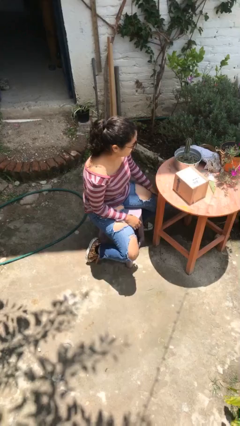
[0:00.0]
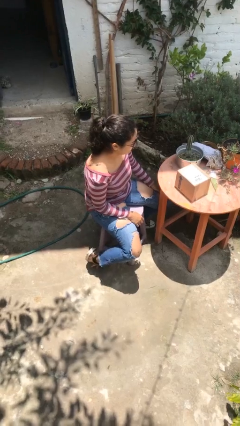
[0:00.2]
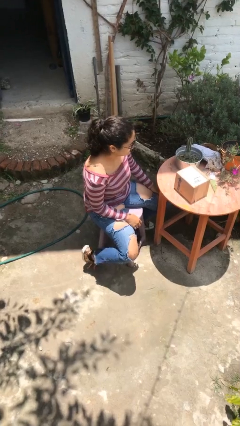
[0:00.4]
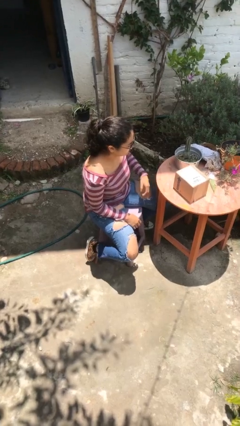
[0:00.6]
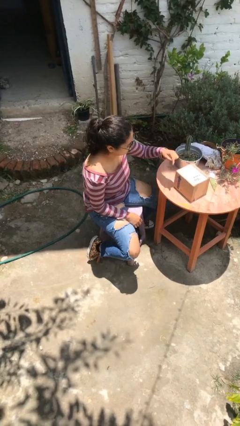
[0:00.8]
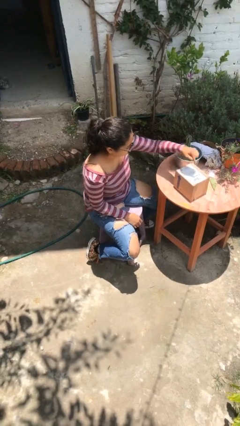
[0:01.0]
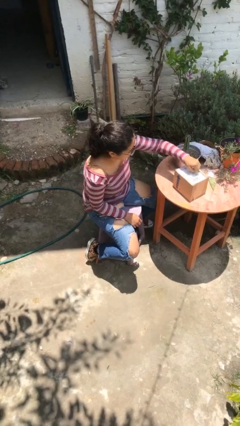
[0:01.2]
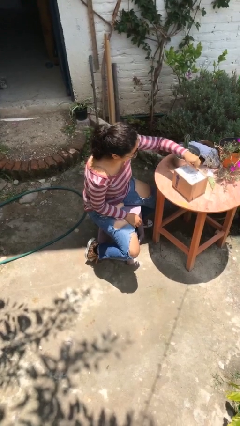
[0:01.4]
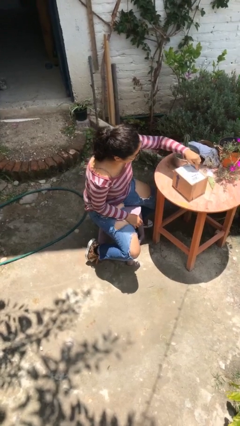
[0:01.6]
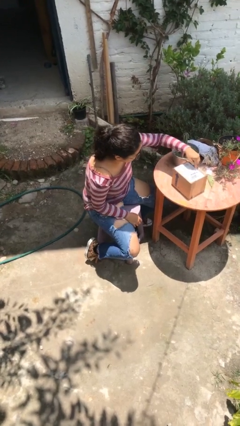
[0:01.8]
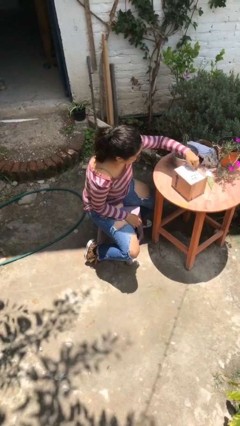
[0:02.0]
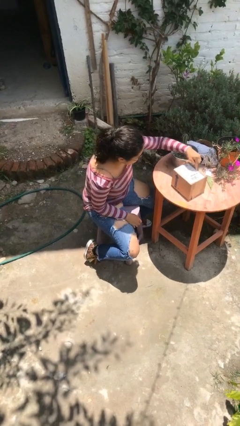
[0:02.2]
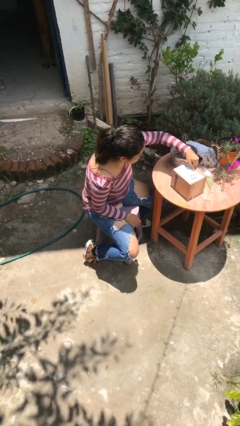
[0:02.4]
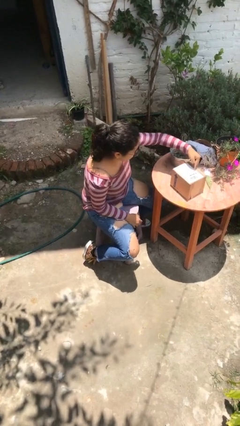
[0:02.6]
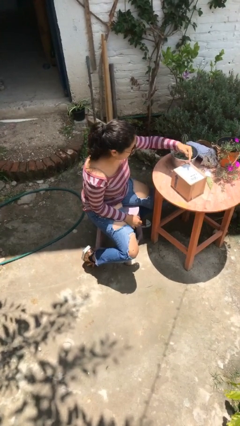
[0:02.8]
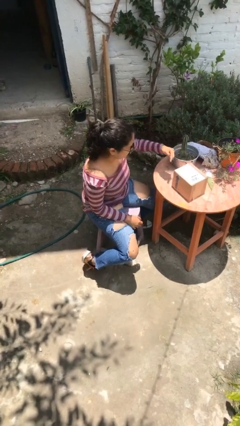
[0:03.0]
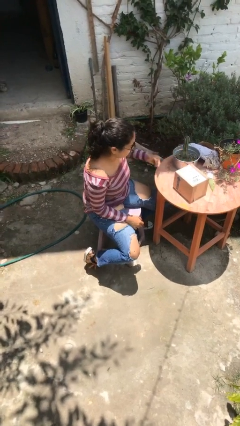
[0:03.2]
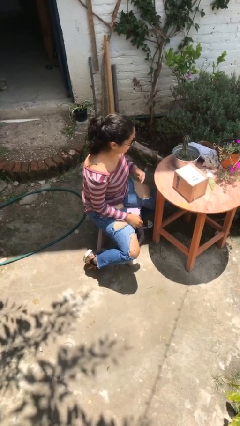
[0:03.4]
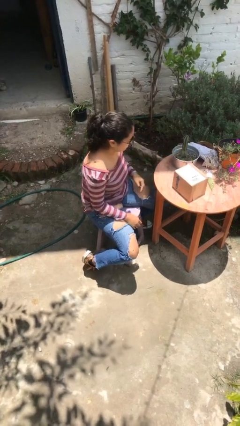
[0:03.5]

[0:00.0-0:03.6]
person swats bug

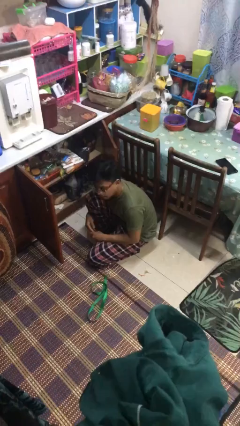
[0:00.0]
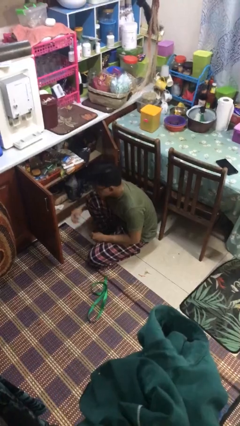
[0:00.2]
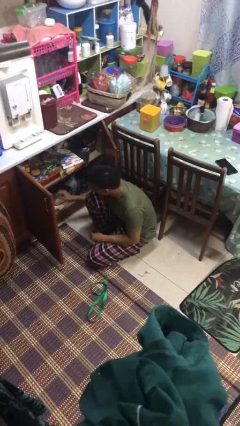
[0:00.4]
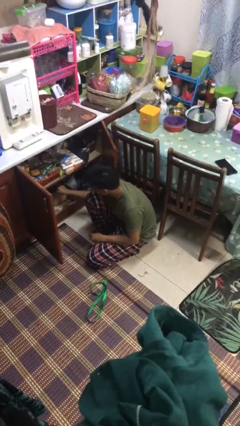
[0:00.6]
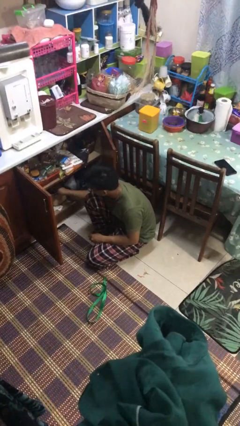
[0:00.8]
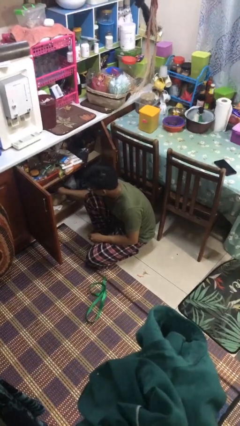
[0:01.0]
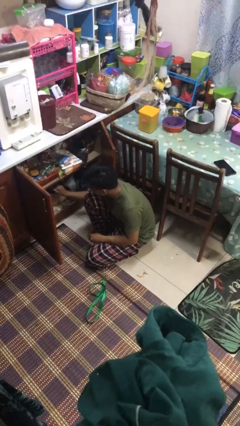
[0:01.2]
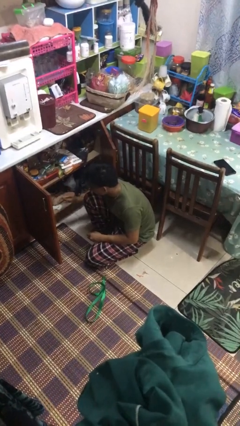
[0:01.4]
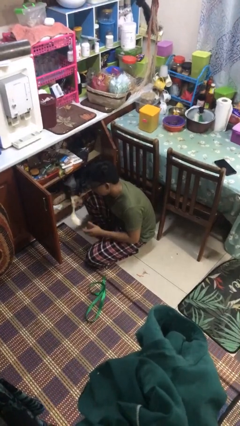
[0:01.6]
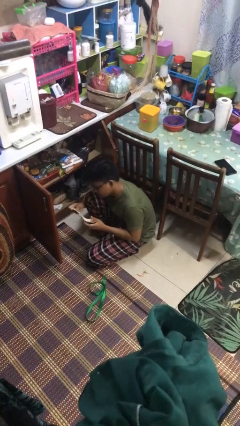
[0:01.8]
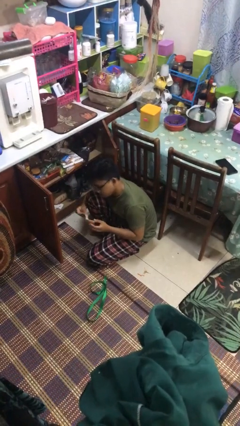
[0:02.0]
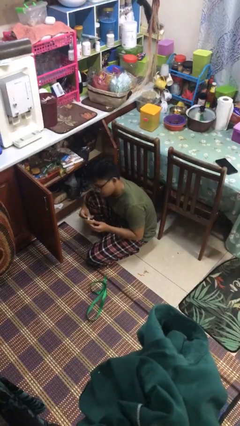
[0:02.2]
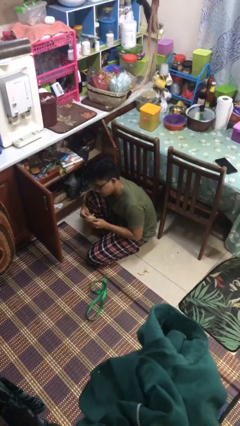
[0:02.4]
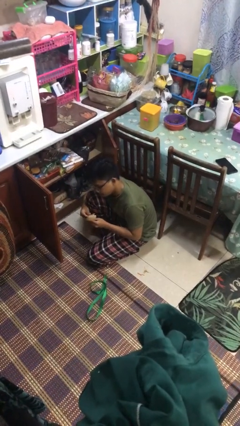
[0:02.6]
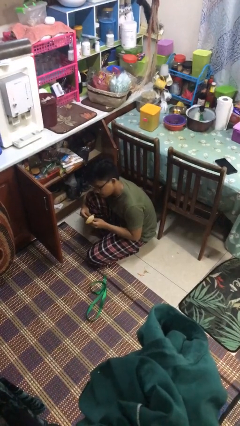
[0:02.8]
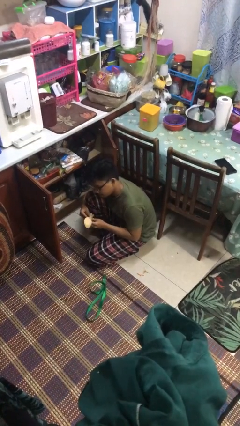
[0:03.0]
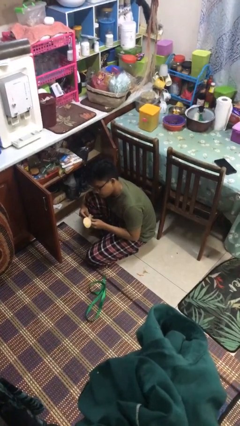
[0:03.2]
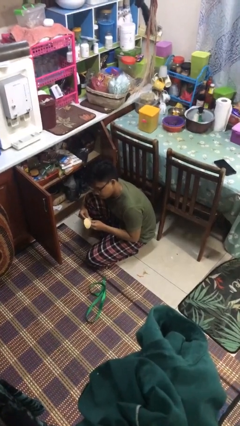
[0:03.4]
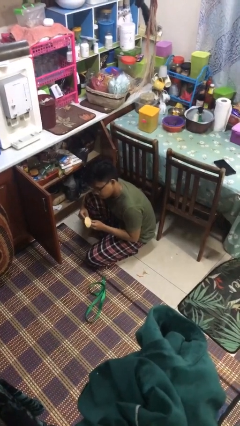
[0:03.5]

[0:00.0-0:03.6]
person takes object from kitchen drawer

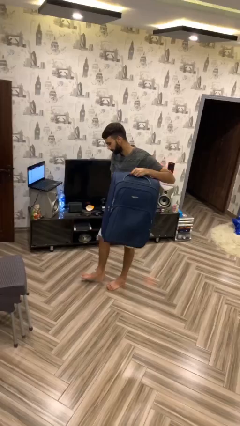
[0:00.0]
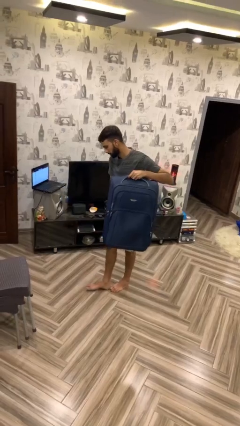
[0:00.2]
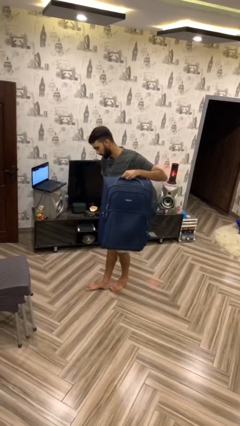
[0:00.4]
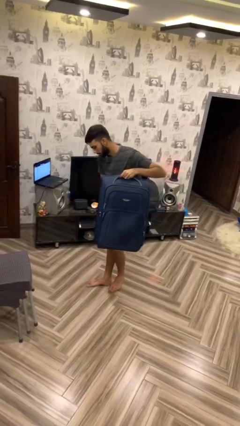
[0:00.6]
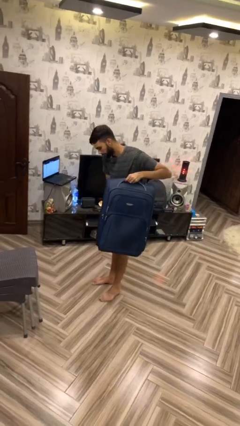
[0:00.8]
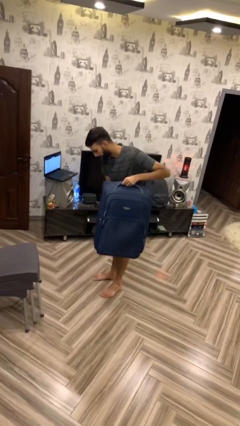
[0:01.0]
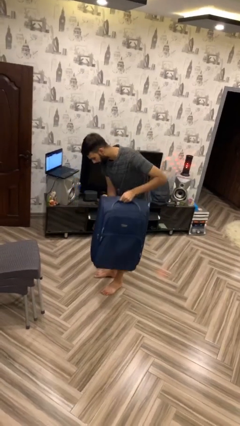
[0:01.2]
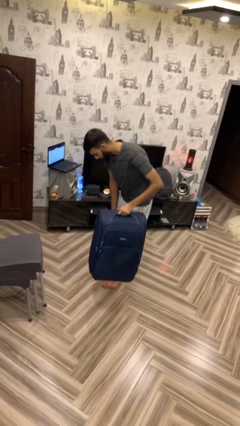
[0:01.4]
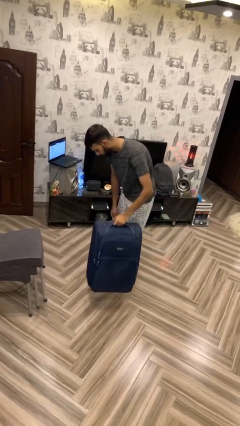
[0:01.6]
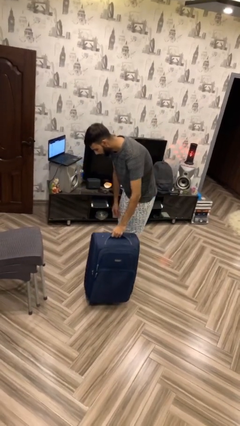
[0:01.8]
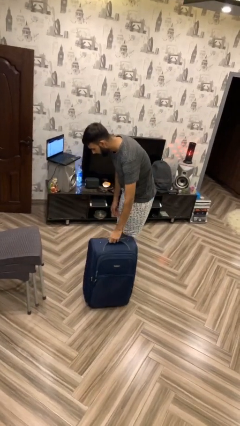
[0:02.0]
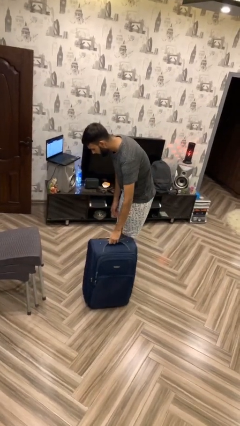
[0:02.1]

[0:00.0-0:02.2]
person puts down object on floor

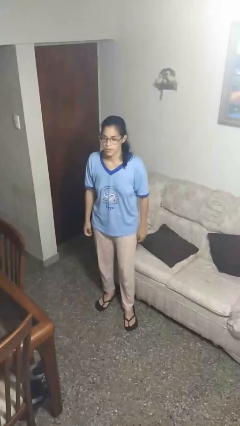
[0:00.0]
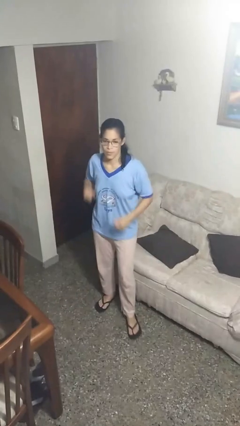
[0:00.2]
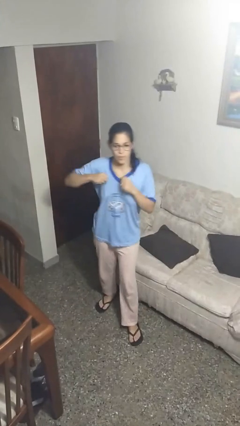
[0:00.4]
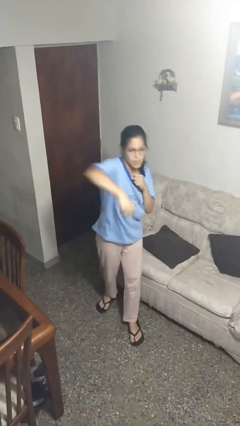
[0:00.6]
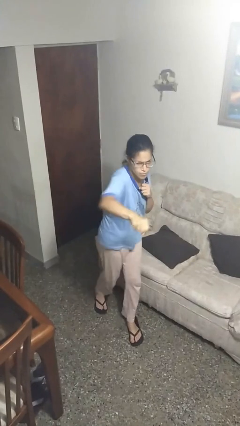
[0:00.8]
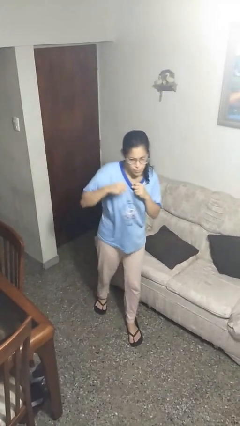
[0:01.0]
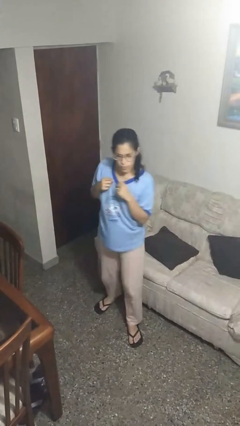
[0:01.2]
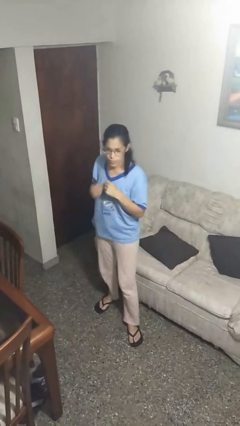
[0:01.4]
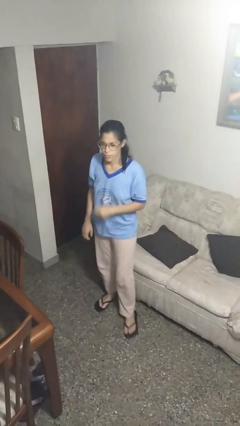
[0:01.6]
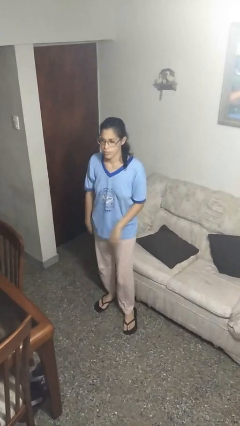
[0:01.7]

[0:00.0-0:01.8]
person karate chop

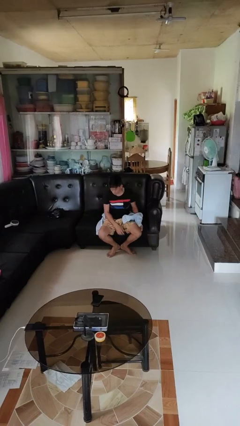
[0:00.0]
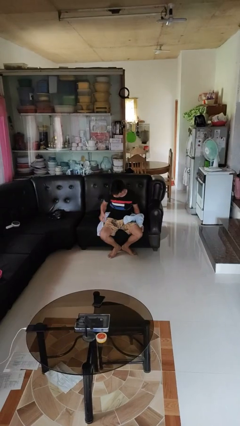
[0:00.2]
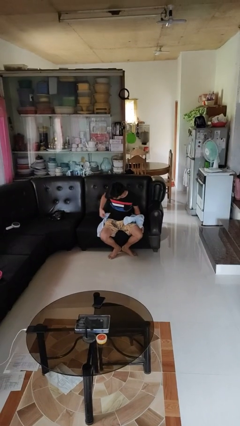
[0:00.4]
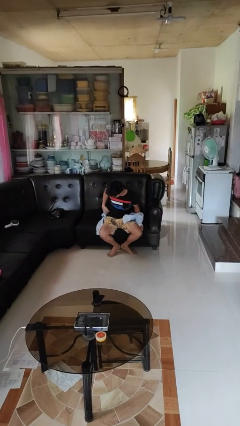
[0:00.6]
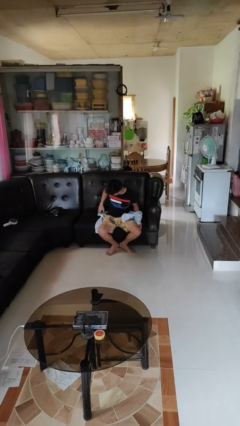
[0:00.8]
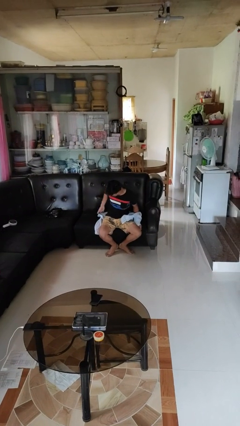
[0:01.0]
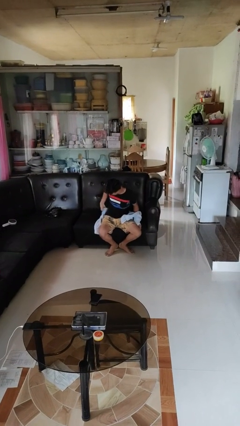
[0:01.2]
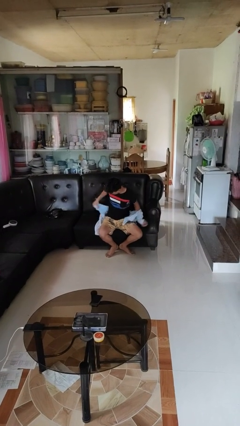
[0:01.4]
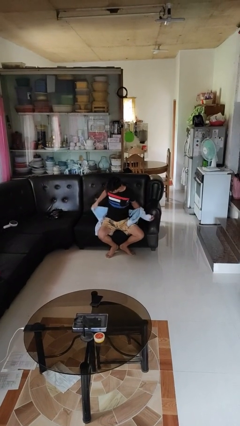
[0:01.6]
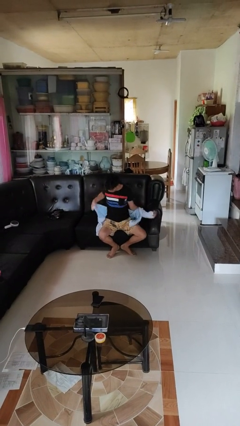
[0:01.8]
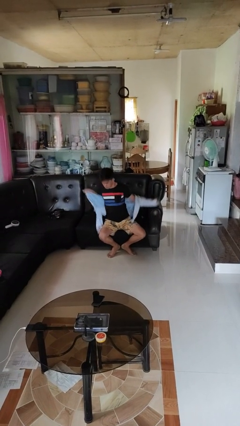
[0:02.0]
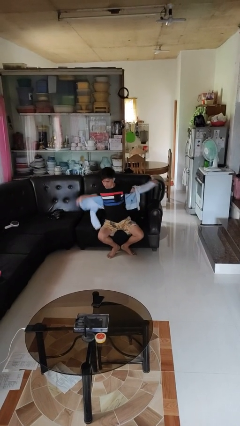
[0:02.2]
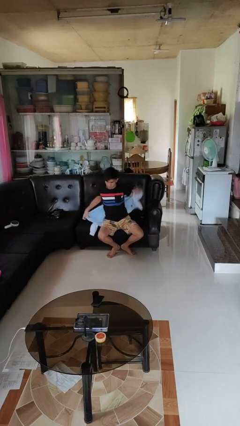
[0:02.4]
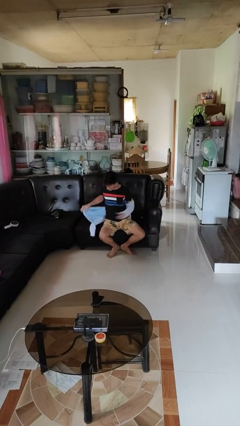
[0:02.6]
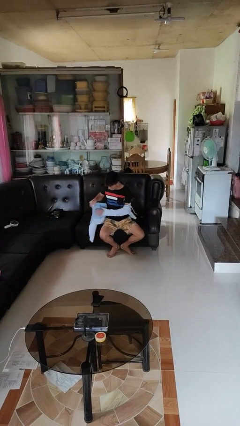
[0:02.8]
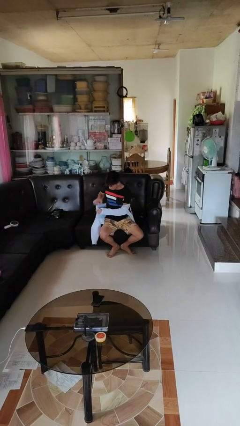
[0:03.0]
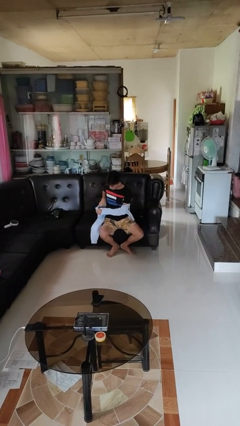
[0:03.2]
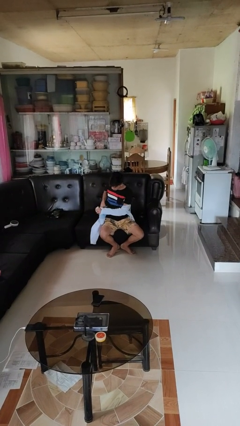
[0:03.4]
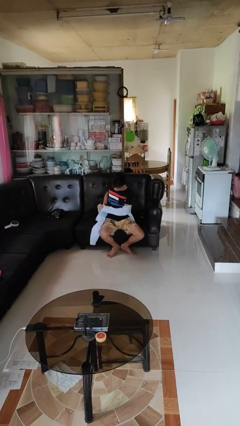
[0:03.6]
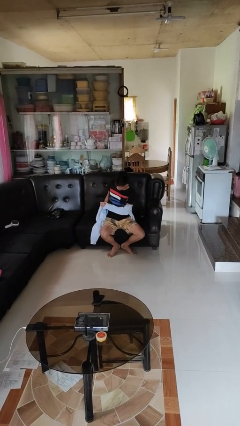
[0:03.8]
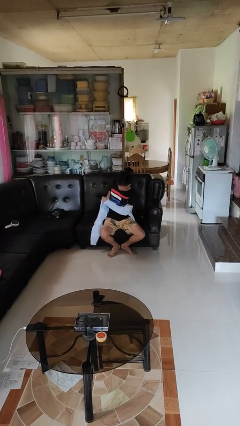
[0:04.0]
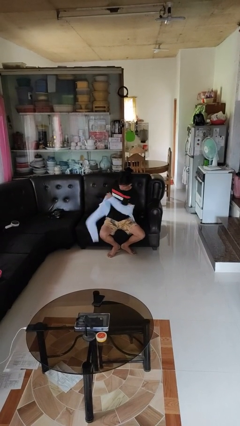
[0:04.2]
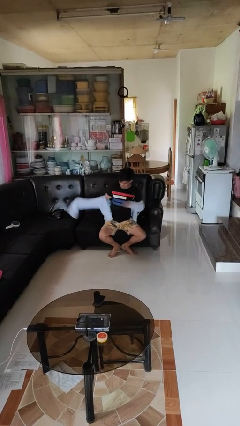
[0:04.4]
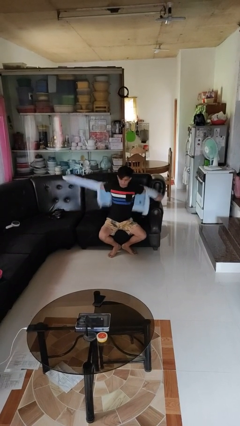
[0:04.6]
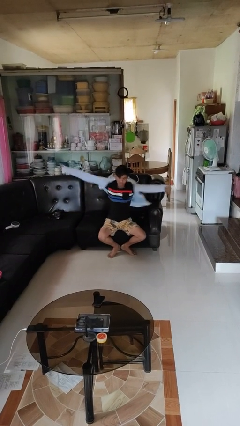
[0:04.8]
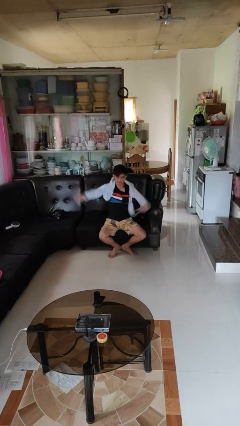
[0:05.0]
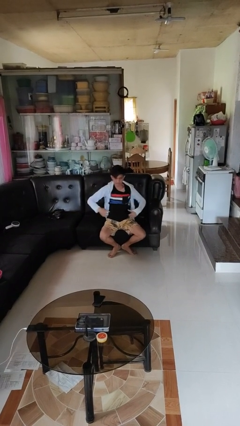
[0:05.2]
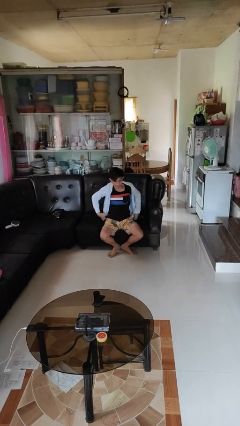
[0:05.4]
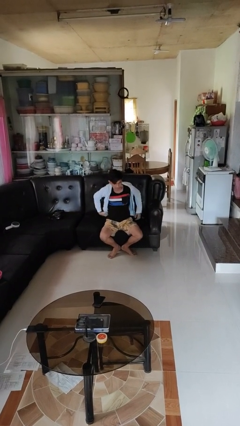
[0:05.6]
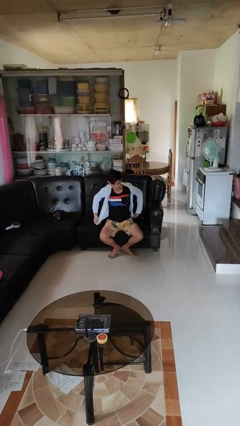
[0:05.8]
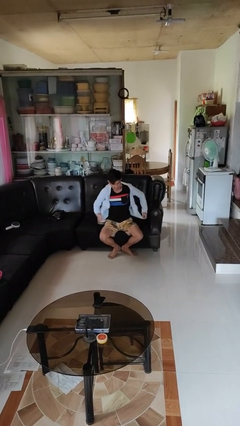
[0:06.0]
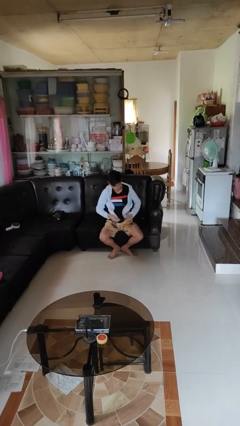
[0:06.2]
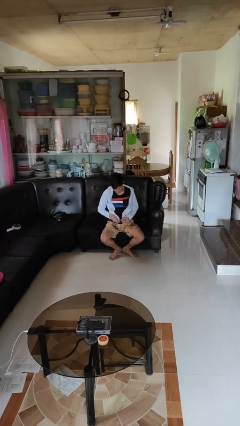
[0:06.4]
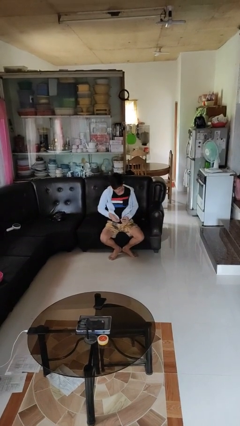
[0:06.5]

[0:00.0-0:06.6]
person puts on jacket
